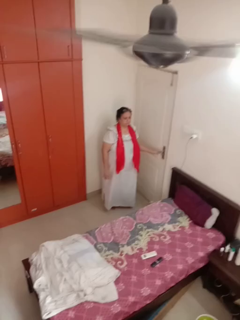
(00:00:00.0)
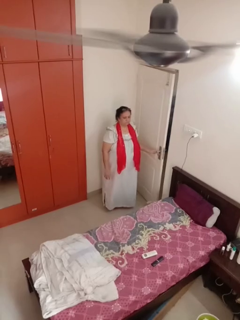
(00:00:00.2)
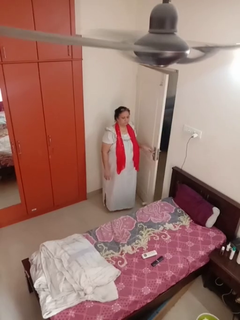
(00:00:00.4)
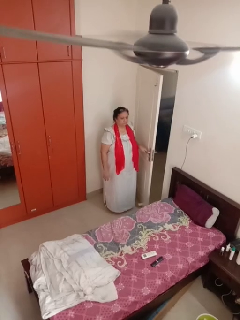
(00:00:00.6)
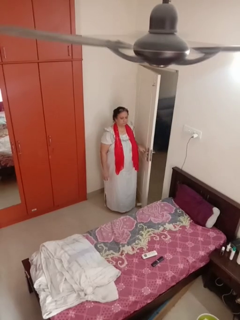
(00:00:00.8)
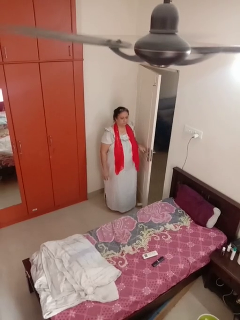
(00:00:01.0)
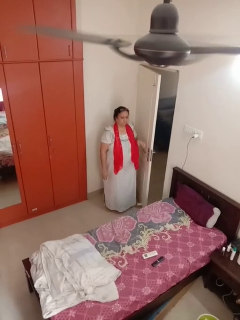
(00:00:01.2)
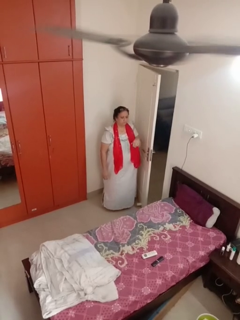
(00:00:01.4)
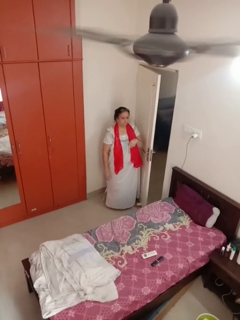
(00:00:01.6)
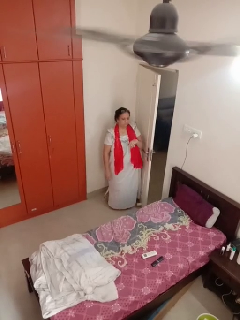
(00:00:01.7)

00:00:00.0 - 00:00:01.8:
person opens facility door

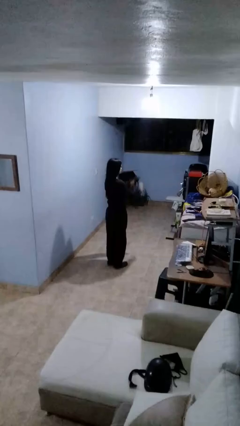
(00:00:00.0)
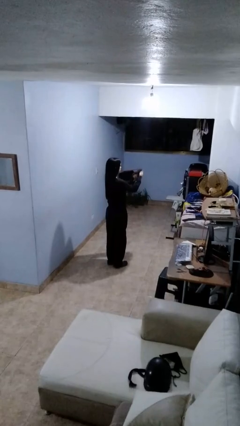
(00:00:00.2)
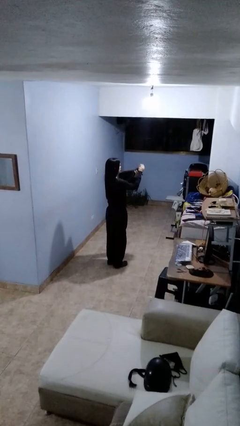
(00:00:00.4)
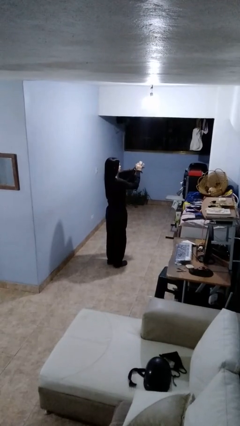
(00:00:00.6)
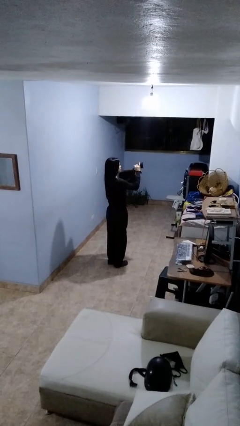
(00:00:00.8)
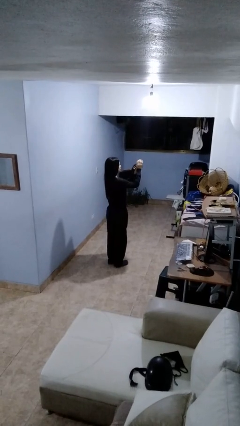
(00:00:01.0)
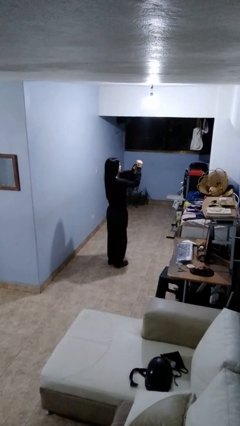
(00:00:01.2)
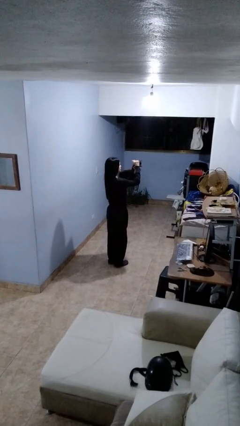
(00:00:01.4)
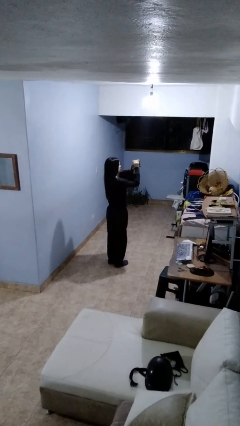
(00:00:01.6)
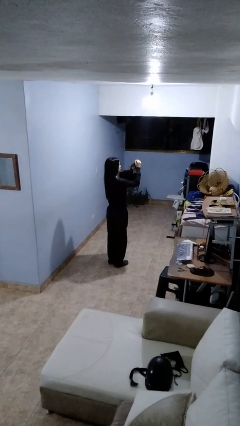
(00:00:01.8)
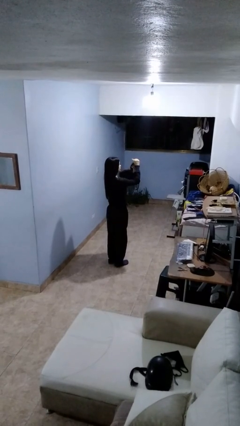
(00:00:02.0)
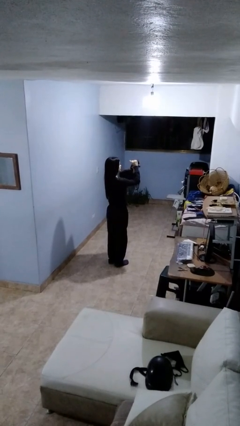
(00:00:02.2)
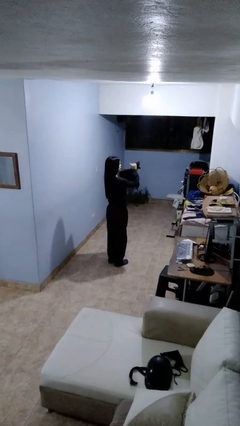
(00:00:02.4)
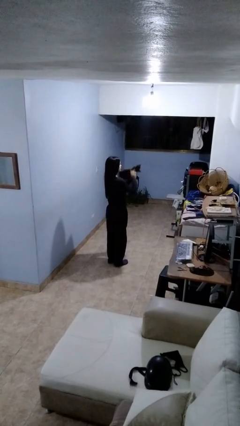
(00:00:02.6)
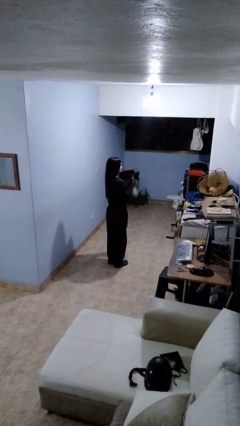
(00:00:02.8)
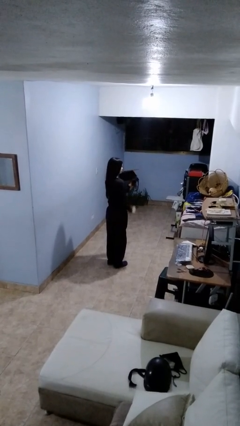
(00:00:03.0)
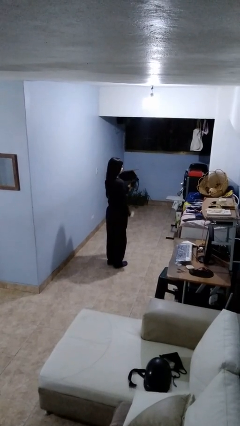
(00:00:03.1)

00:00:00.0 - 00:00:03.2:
person pets cat

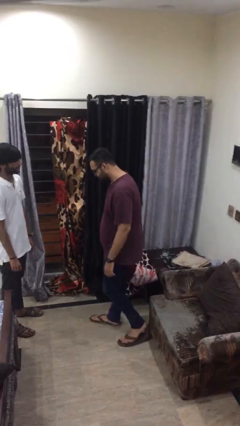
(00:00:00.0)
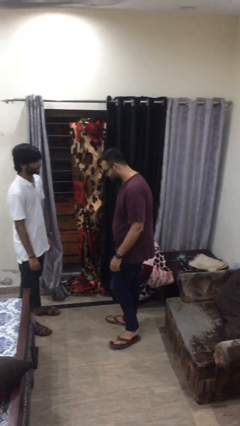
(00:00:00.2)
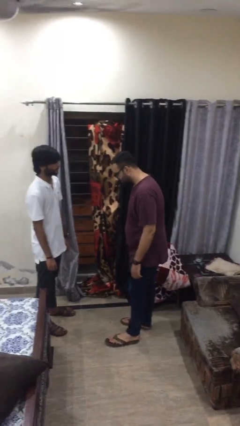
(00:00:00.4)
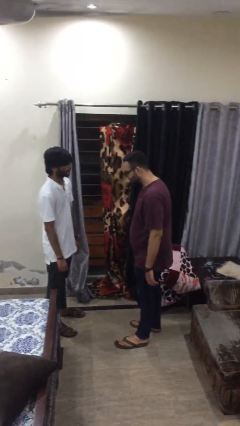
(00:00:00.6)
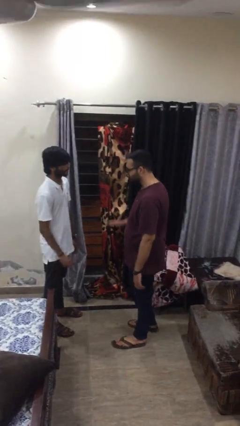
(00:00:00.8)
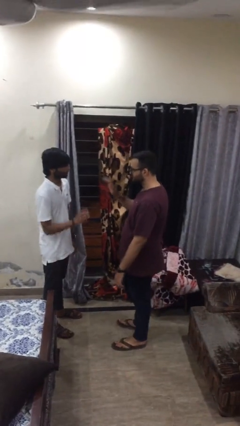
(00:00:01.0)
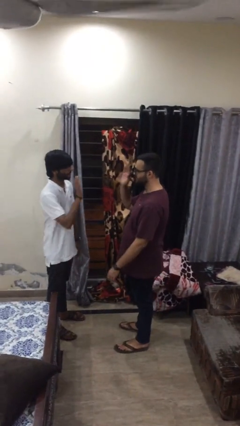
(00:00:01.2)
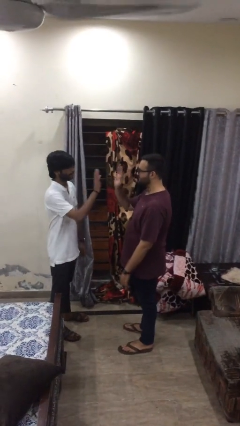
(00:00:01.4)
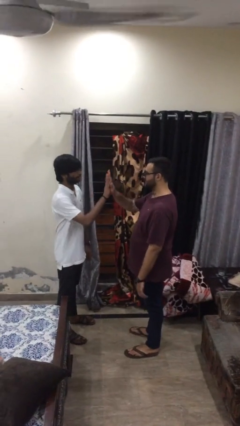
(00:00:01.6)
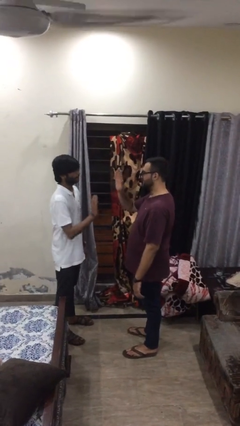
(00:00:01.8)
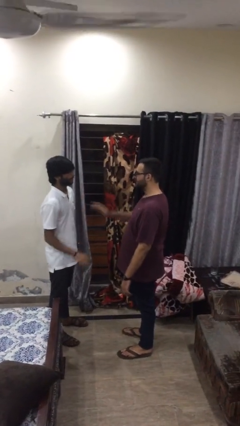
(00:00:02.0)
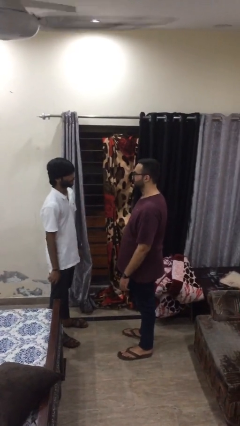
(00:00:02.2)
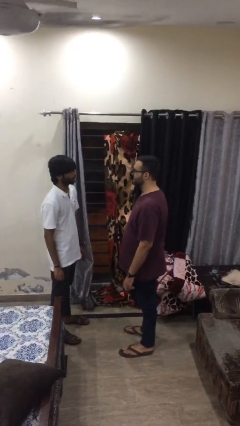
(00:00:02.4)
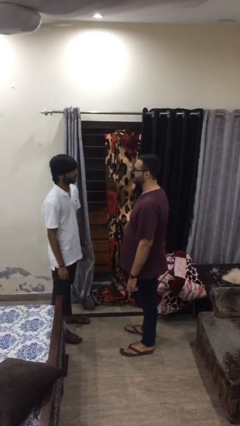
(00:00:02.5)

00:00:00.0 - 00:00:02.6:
person highfives hand

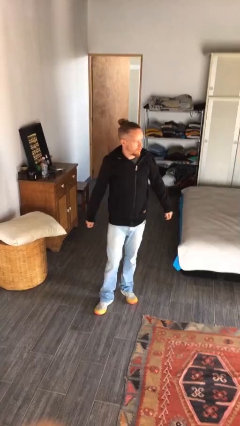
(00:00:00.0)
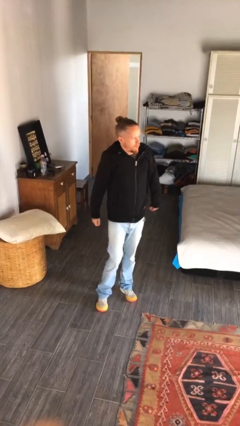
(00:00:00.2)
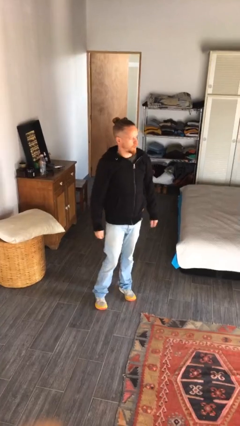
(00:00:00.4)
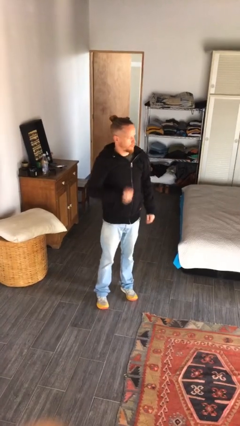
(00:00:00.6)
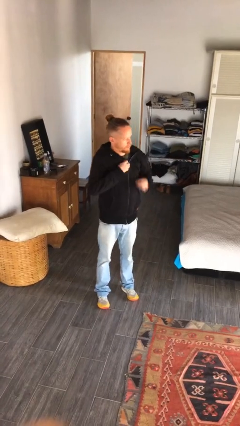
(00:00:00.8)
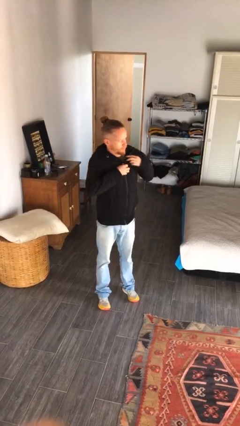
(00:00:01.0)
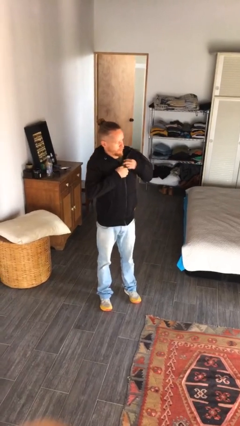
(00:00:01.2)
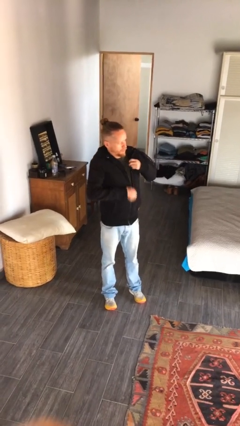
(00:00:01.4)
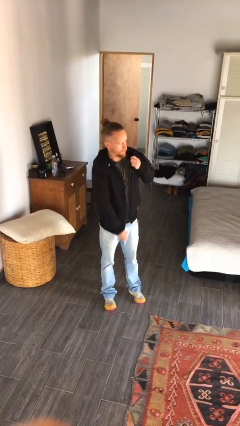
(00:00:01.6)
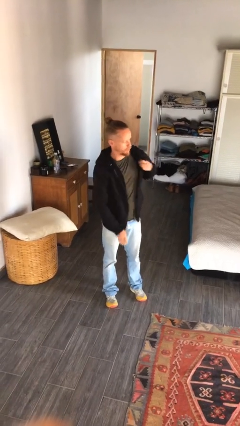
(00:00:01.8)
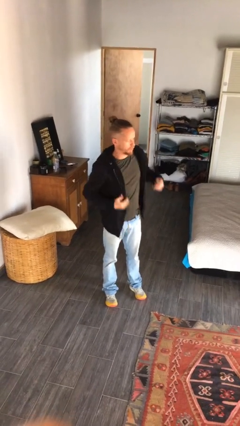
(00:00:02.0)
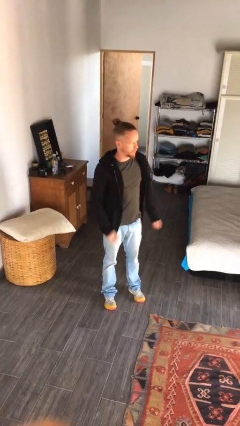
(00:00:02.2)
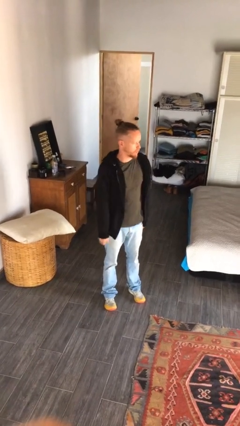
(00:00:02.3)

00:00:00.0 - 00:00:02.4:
person unzips jacket

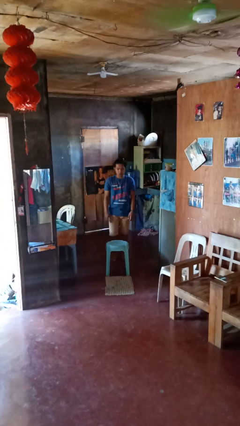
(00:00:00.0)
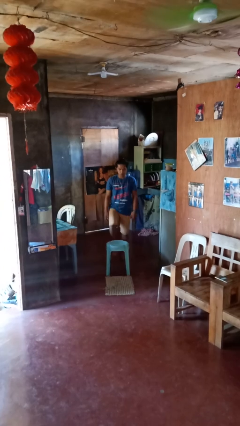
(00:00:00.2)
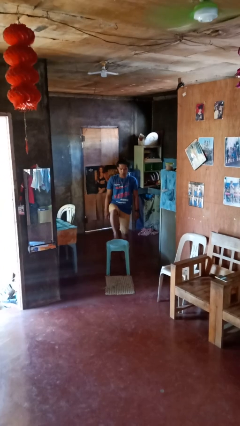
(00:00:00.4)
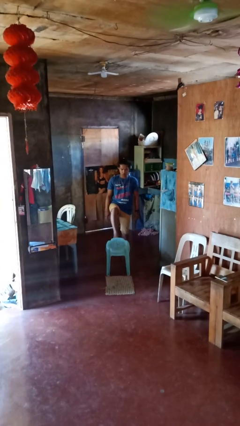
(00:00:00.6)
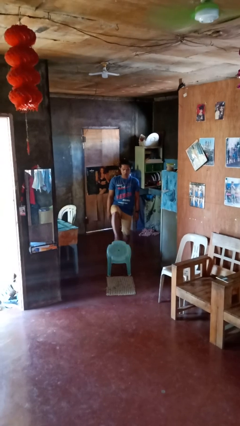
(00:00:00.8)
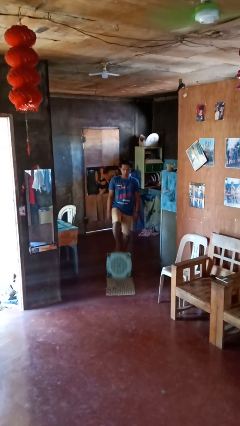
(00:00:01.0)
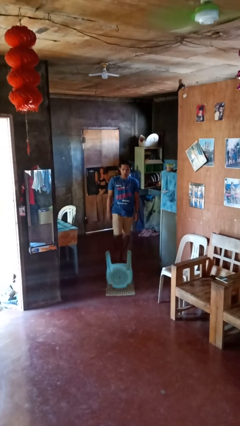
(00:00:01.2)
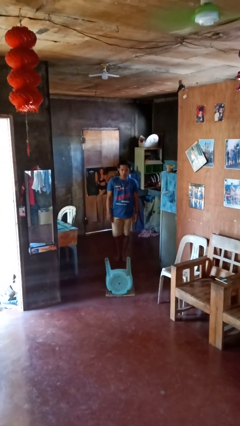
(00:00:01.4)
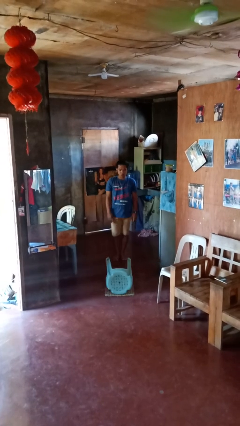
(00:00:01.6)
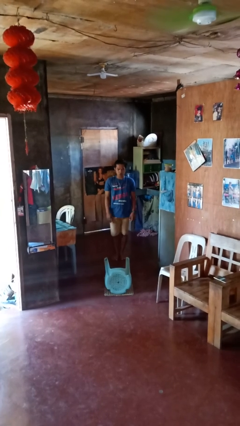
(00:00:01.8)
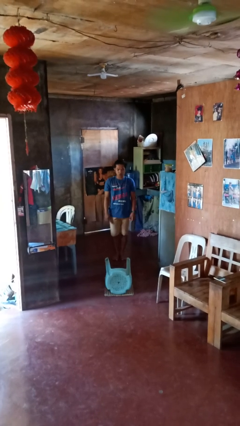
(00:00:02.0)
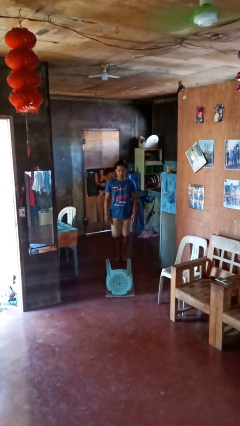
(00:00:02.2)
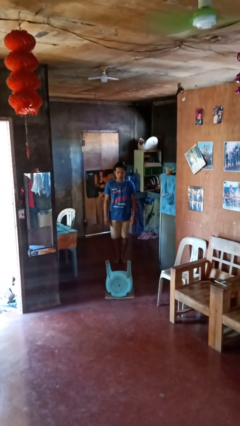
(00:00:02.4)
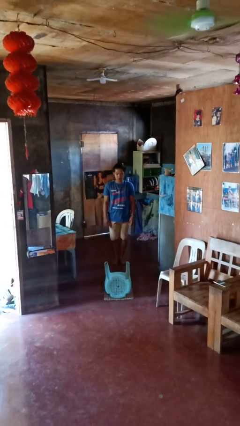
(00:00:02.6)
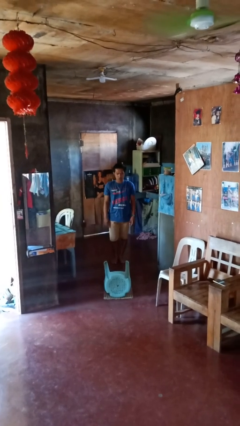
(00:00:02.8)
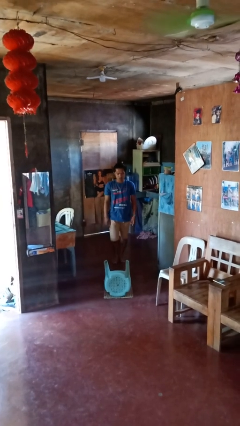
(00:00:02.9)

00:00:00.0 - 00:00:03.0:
person knocks over furniture

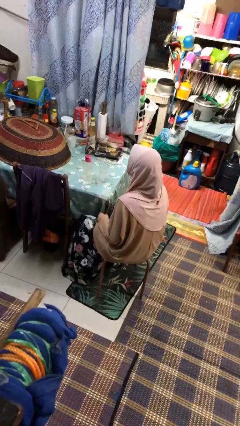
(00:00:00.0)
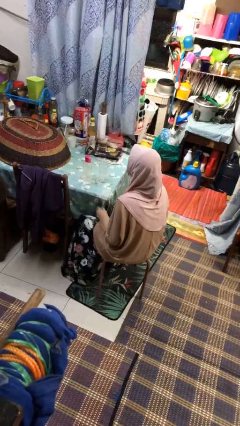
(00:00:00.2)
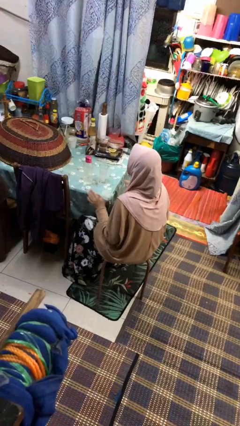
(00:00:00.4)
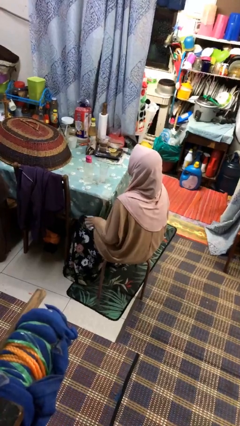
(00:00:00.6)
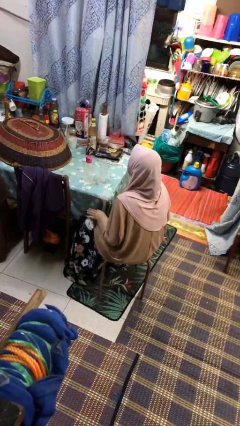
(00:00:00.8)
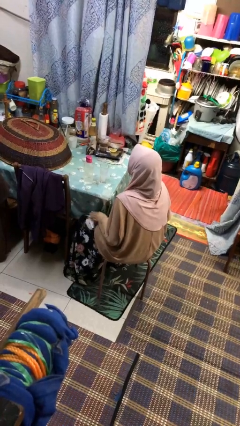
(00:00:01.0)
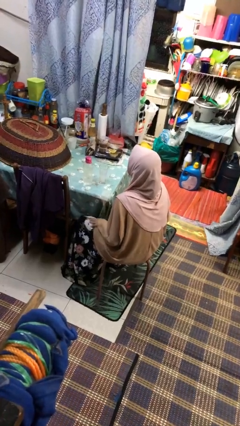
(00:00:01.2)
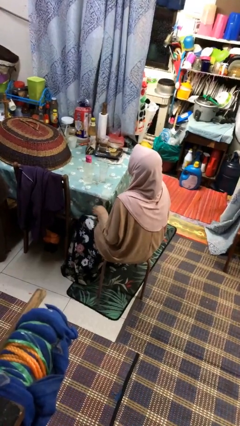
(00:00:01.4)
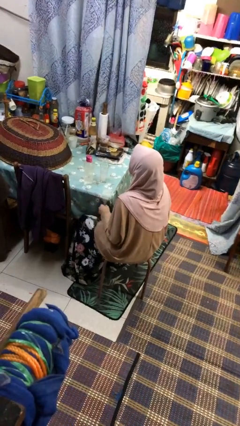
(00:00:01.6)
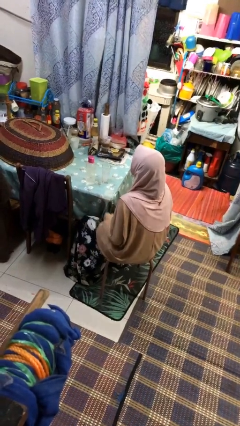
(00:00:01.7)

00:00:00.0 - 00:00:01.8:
person slaps hands on thighs

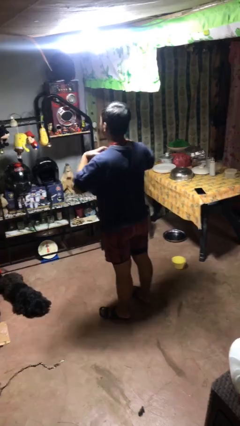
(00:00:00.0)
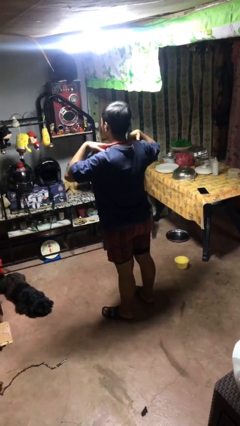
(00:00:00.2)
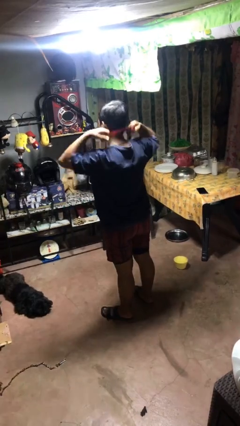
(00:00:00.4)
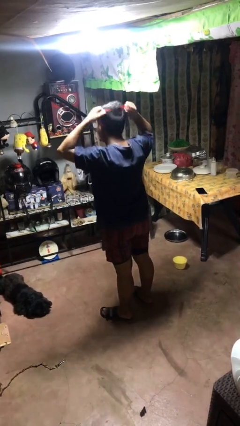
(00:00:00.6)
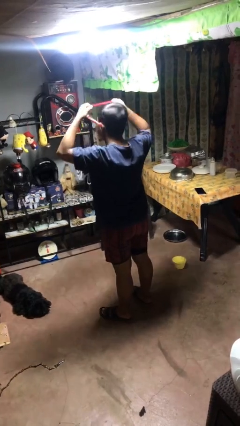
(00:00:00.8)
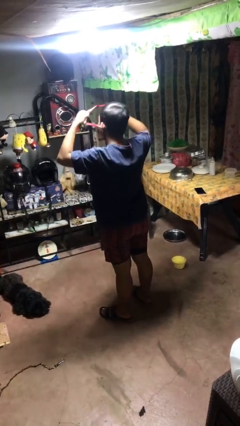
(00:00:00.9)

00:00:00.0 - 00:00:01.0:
person takes off necklace

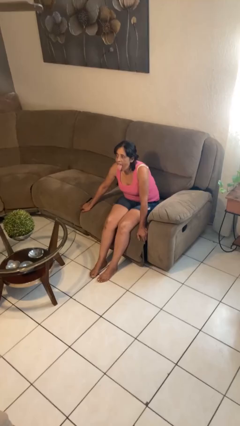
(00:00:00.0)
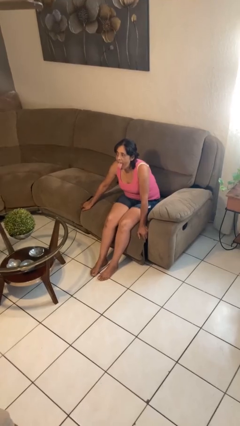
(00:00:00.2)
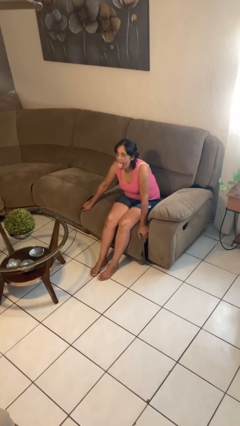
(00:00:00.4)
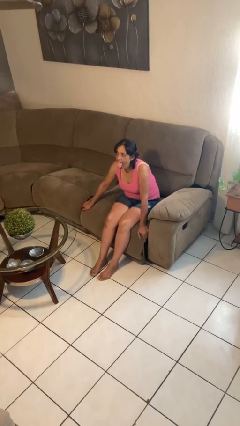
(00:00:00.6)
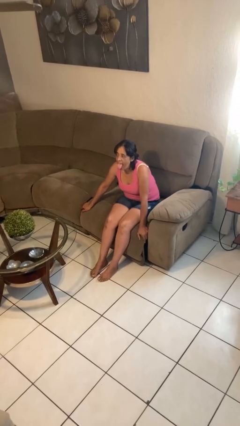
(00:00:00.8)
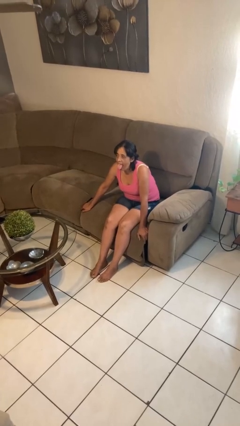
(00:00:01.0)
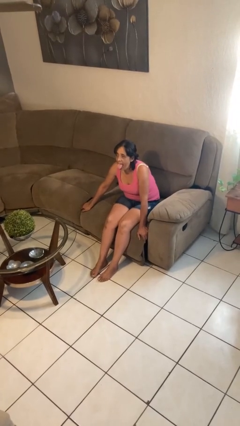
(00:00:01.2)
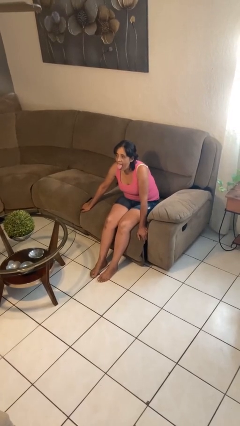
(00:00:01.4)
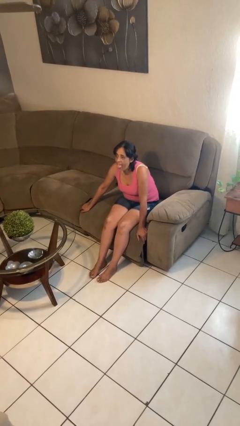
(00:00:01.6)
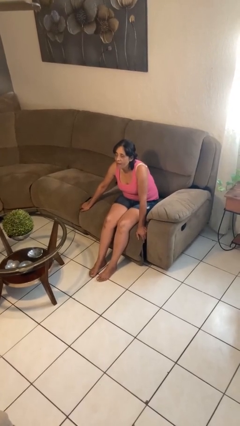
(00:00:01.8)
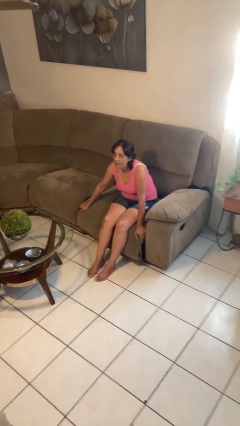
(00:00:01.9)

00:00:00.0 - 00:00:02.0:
person sticks out tongue
